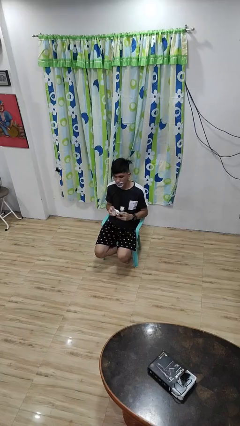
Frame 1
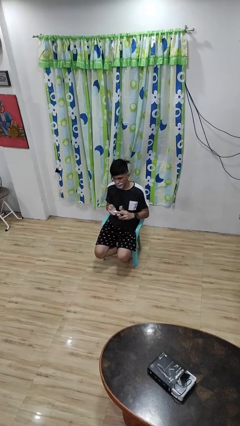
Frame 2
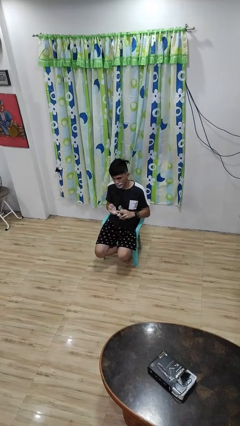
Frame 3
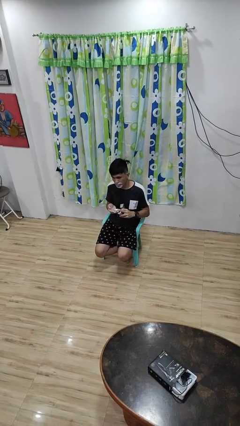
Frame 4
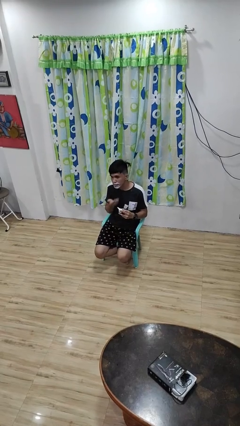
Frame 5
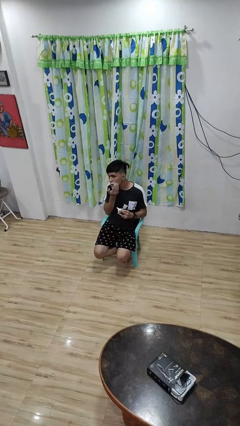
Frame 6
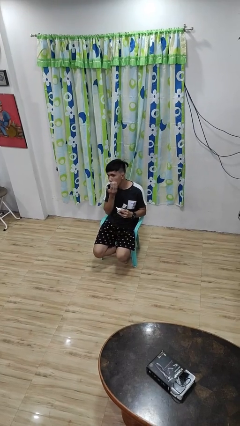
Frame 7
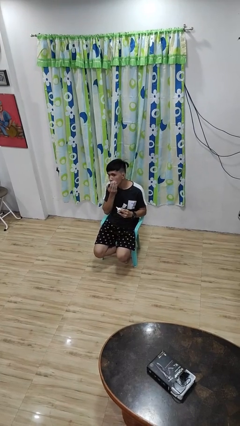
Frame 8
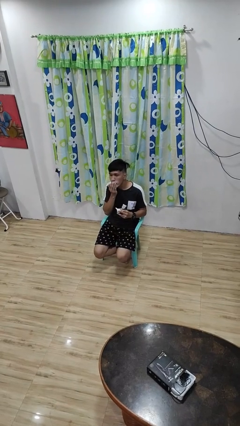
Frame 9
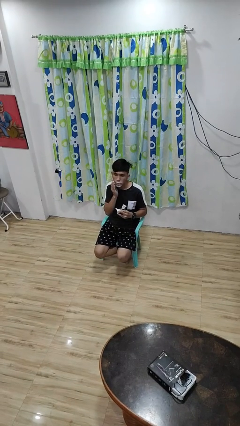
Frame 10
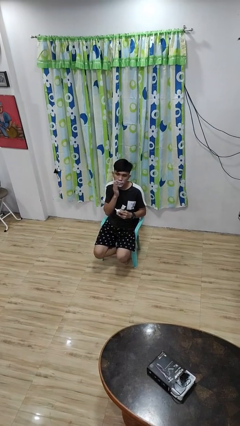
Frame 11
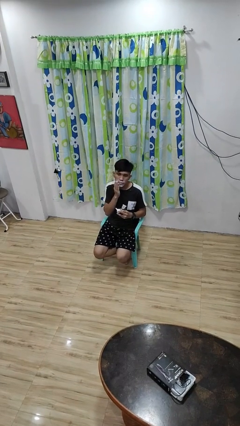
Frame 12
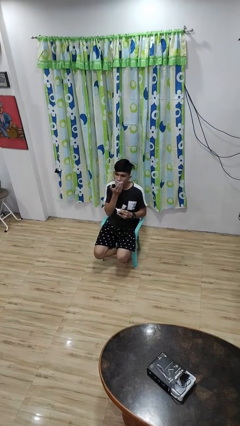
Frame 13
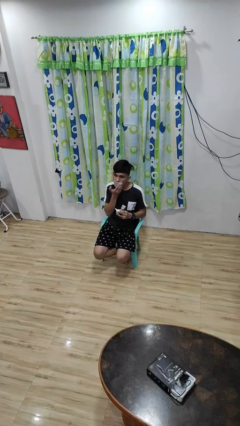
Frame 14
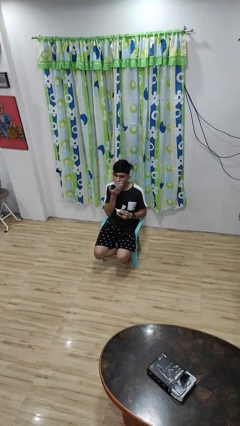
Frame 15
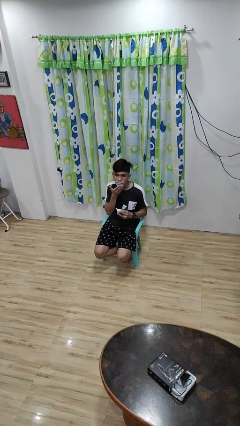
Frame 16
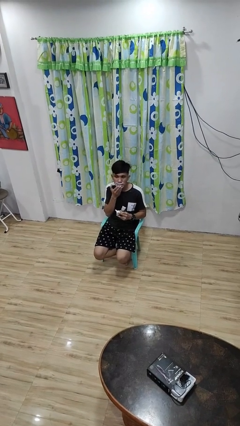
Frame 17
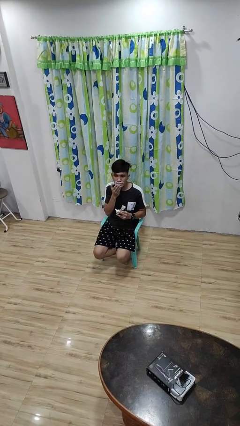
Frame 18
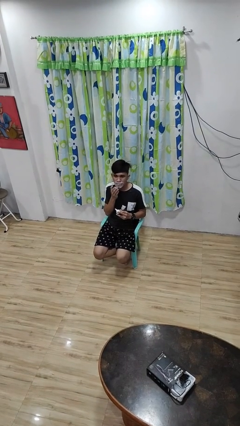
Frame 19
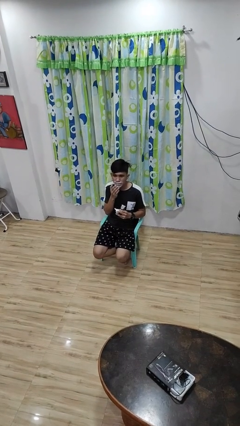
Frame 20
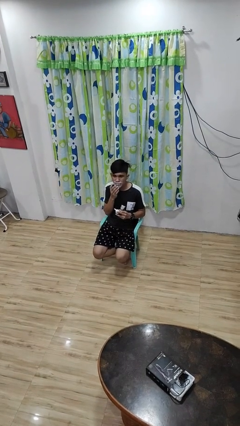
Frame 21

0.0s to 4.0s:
person applies shaving cream

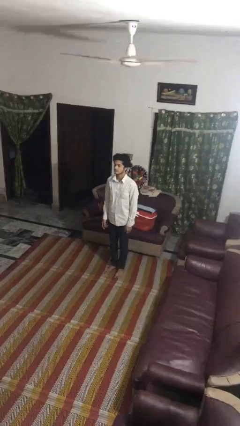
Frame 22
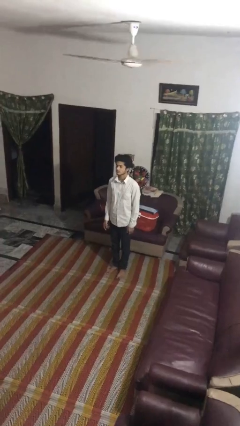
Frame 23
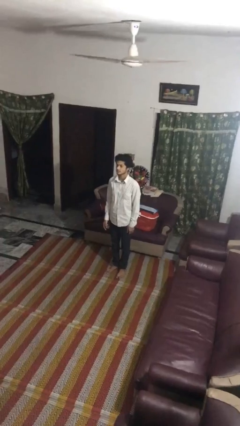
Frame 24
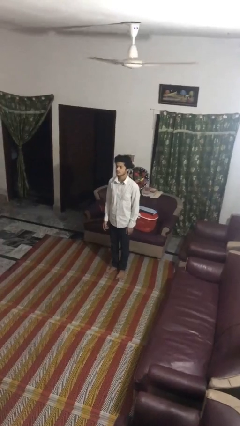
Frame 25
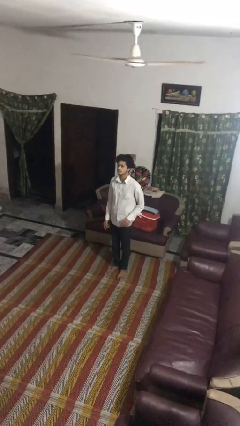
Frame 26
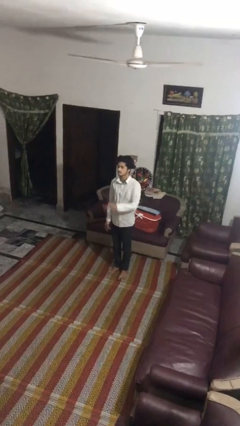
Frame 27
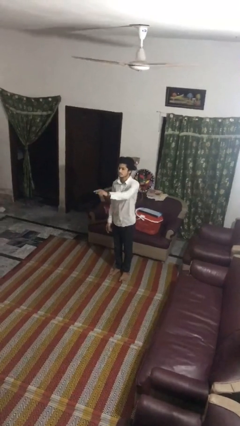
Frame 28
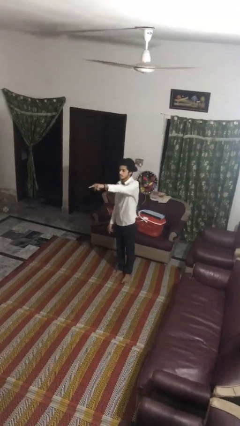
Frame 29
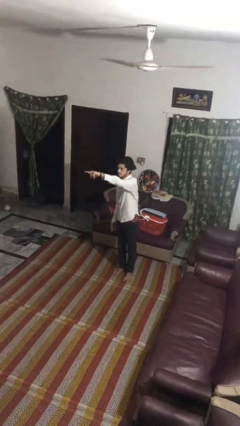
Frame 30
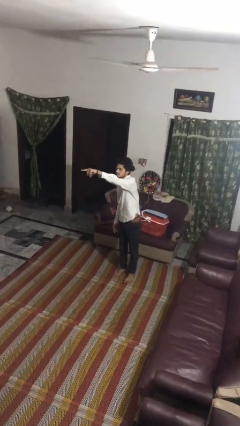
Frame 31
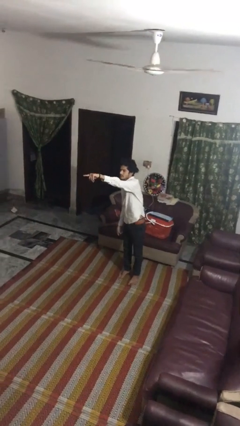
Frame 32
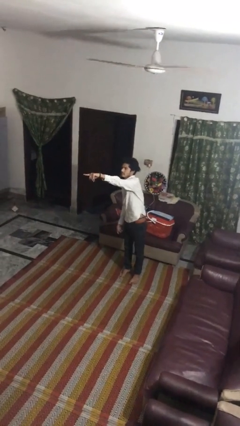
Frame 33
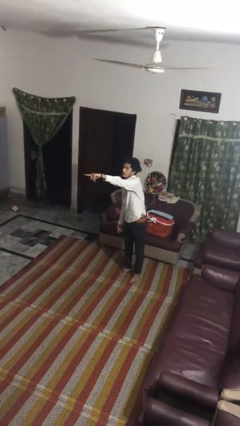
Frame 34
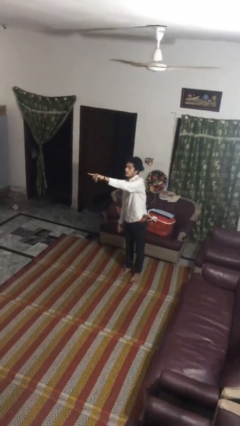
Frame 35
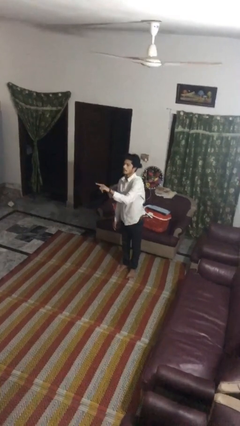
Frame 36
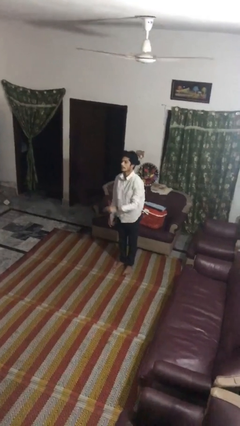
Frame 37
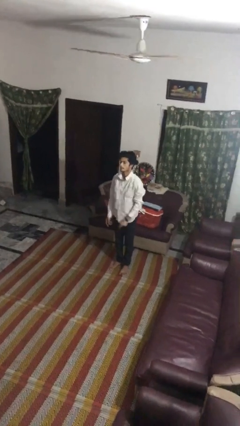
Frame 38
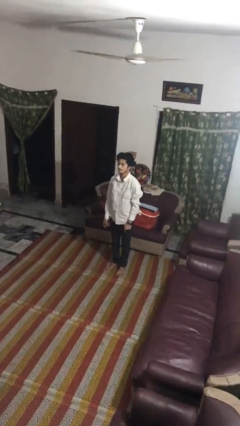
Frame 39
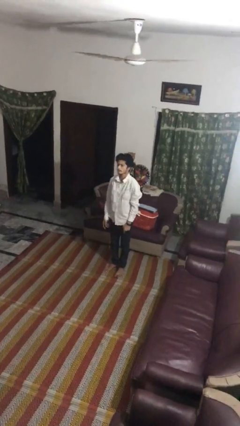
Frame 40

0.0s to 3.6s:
person points at person

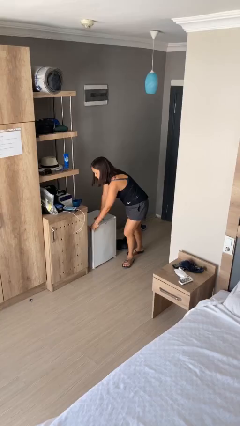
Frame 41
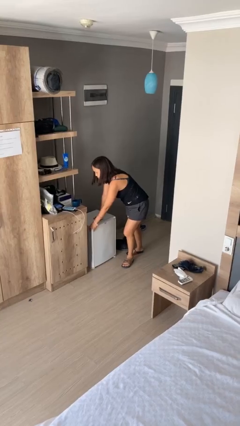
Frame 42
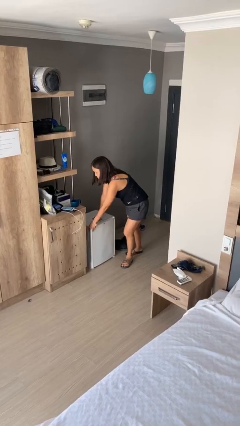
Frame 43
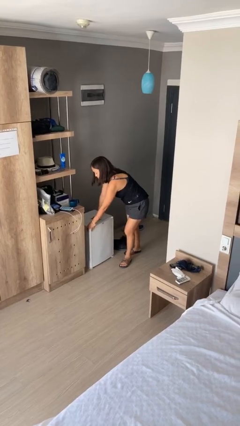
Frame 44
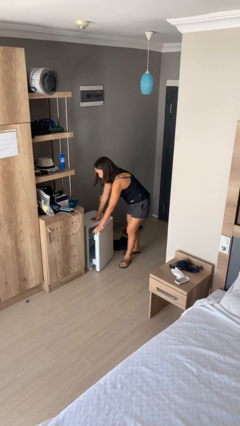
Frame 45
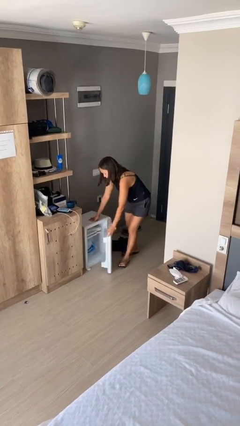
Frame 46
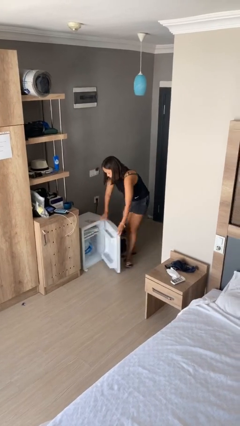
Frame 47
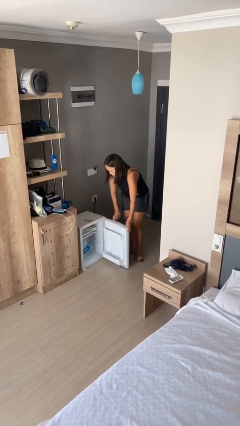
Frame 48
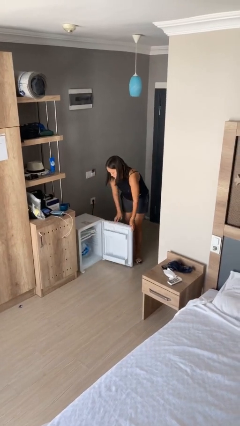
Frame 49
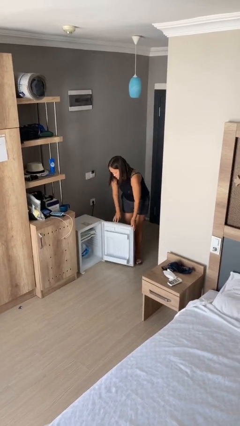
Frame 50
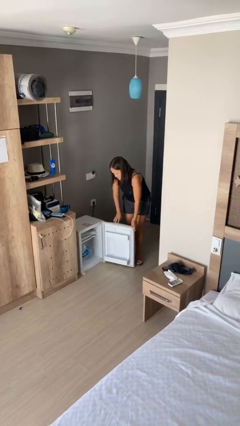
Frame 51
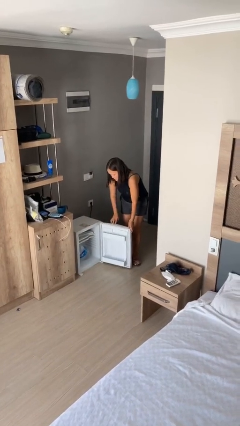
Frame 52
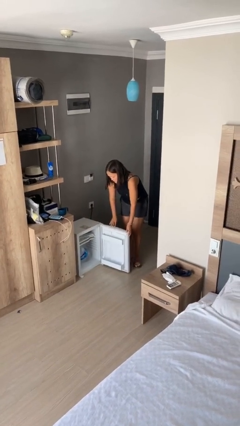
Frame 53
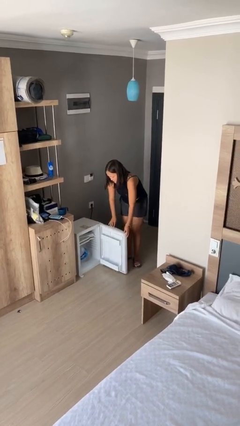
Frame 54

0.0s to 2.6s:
person opens refrigerator

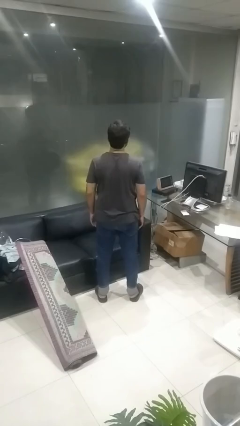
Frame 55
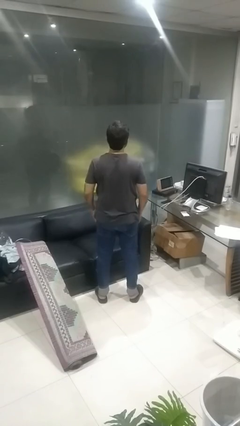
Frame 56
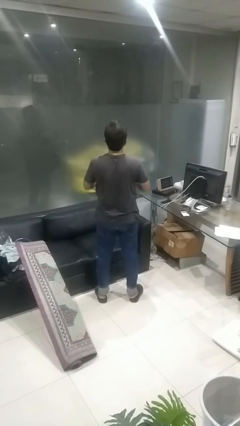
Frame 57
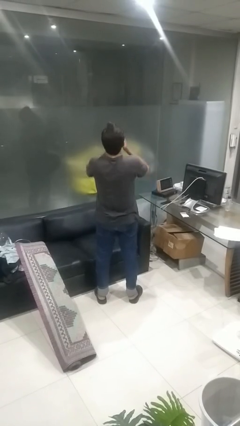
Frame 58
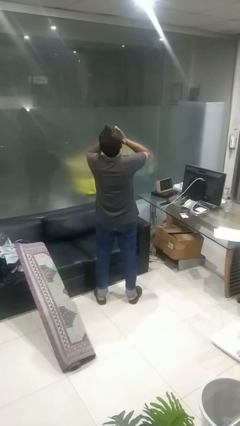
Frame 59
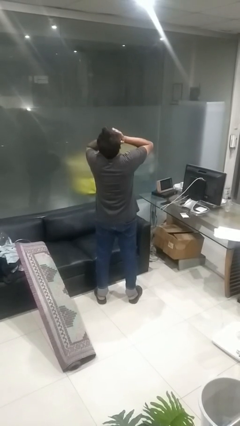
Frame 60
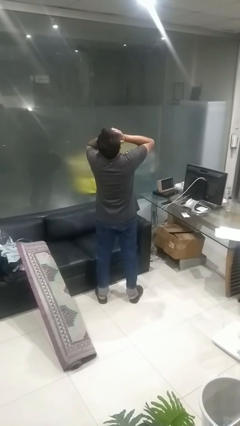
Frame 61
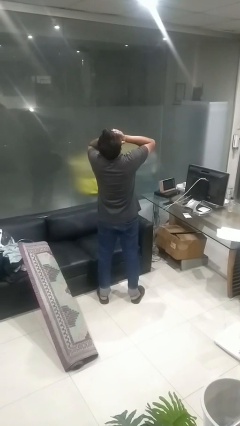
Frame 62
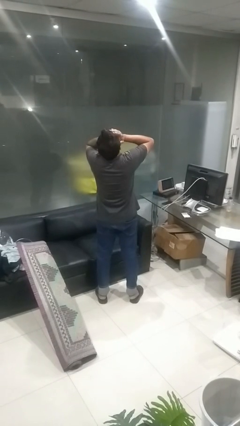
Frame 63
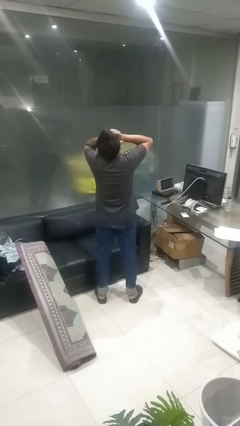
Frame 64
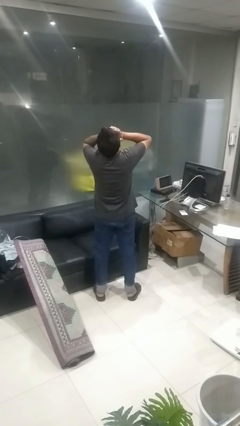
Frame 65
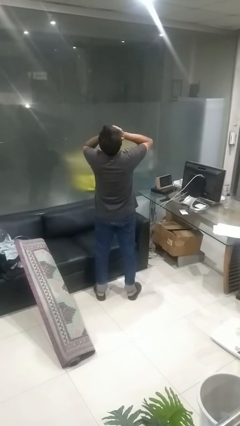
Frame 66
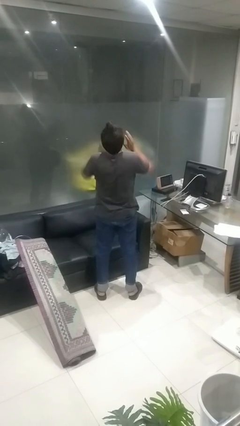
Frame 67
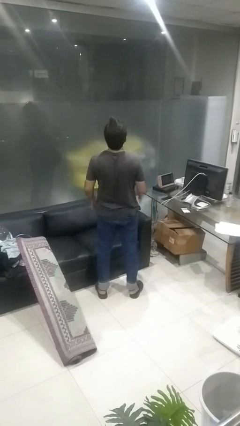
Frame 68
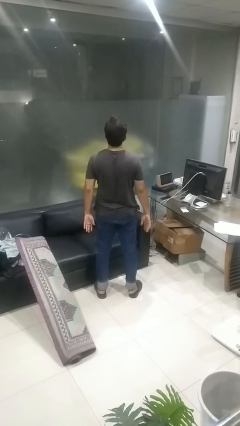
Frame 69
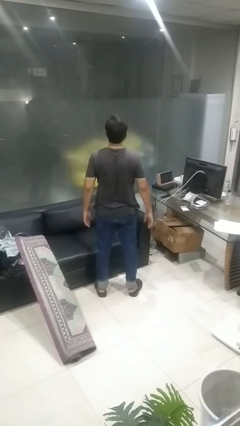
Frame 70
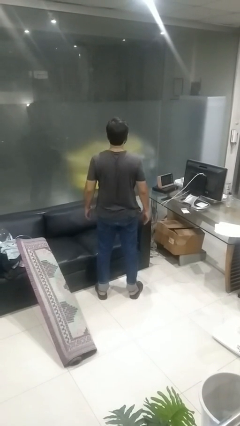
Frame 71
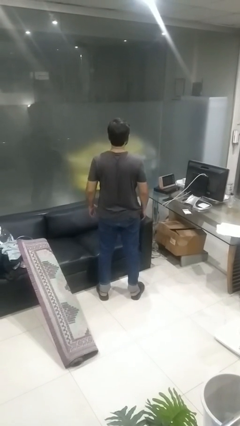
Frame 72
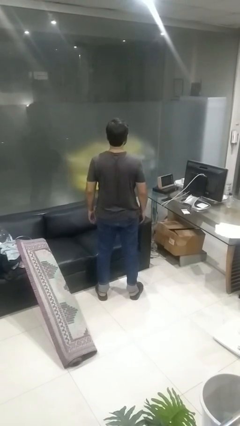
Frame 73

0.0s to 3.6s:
person covers face with hands

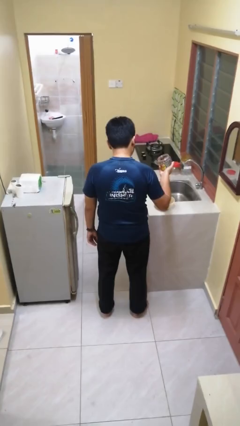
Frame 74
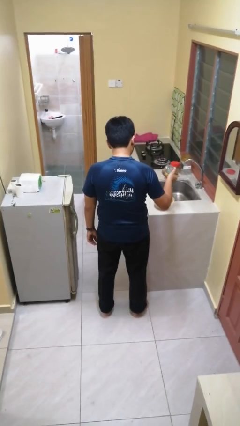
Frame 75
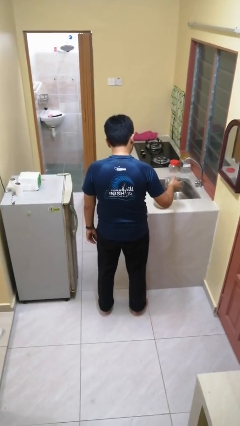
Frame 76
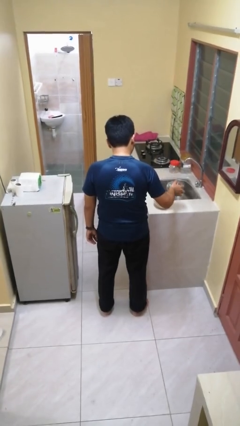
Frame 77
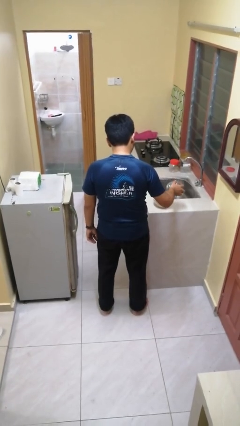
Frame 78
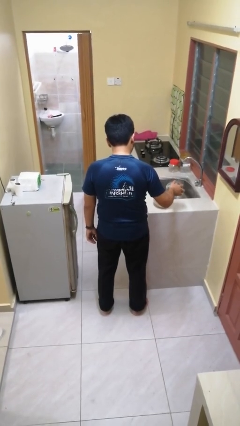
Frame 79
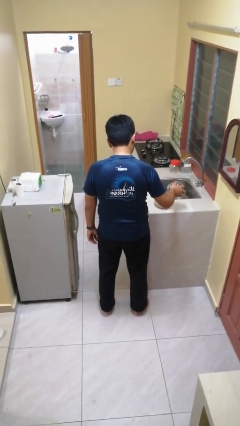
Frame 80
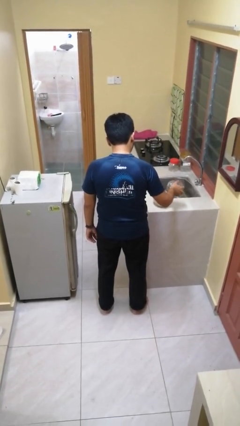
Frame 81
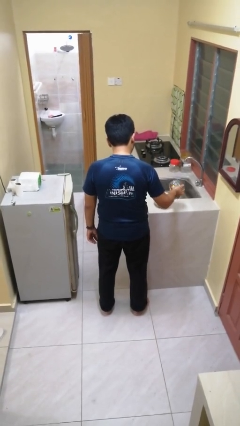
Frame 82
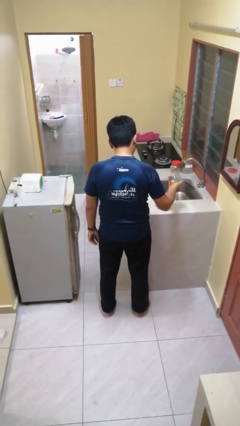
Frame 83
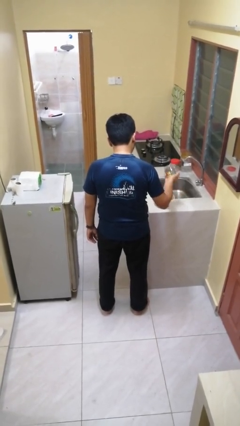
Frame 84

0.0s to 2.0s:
person pours into bowl

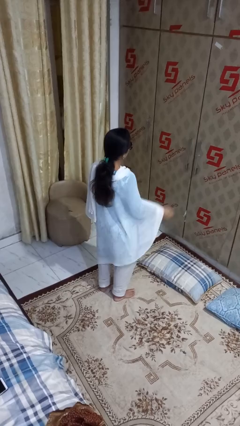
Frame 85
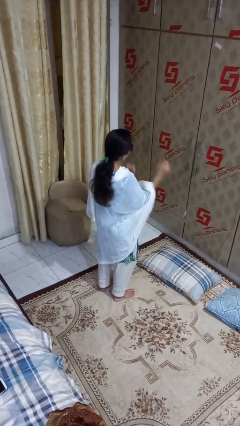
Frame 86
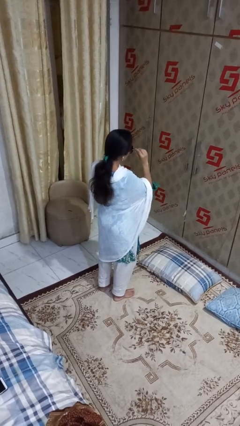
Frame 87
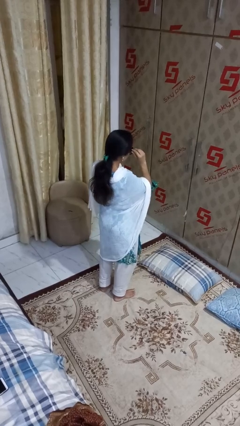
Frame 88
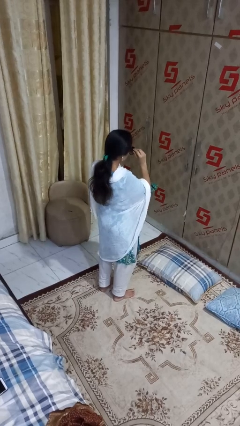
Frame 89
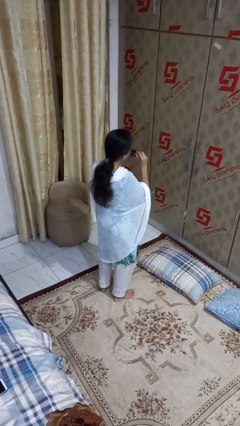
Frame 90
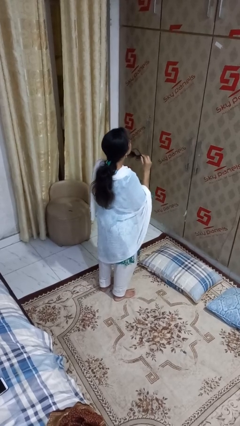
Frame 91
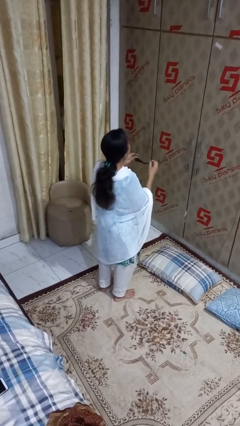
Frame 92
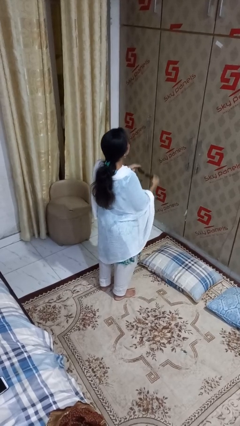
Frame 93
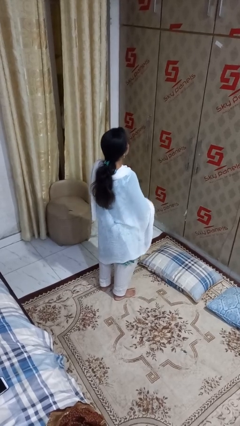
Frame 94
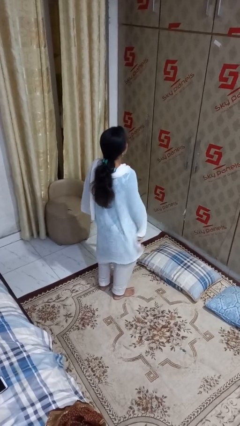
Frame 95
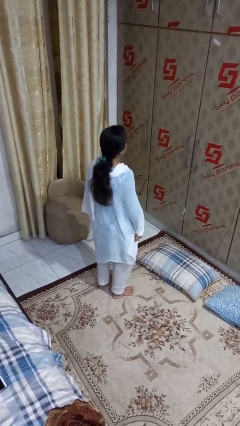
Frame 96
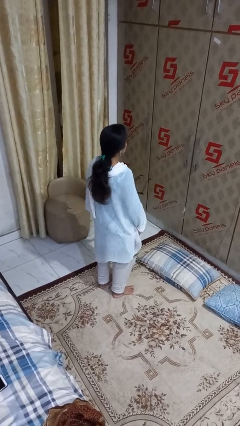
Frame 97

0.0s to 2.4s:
person takes off sunglasses
